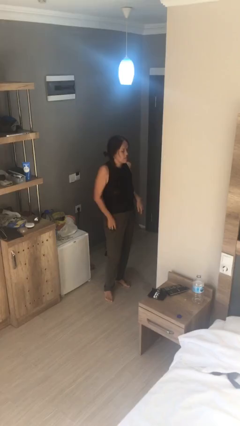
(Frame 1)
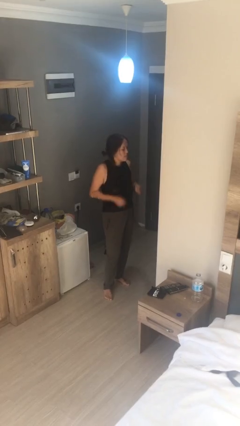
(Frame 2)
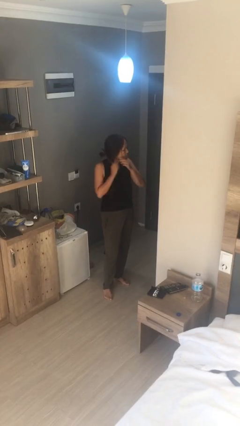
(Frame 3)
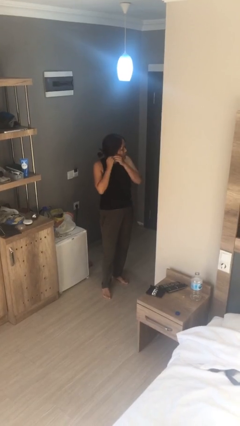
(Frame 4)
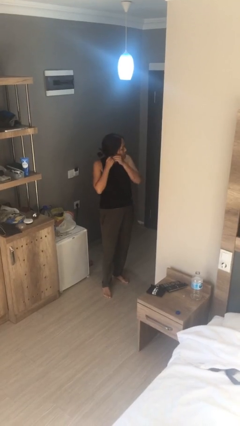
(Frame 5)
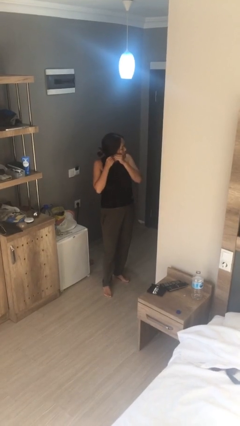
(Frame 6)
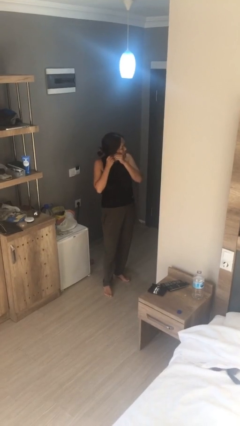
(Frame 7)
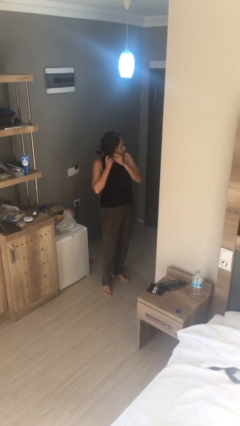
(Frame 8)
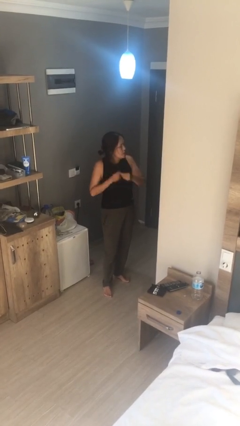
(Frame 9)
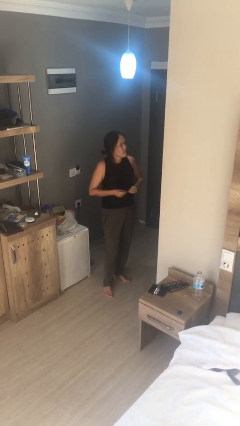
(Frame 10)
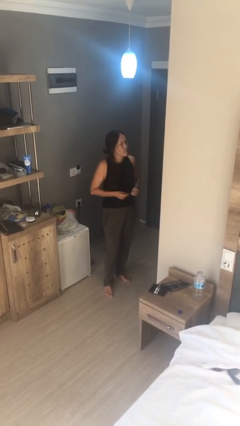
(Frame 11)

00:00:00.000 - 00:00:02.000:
person takes off earrings

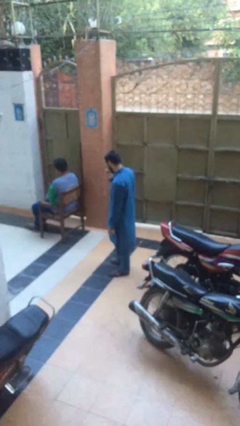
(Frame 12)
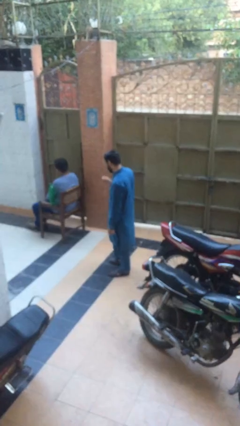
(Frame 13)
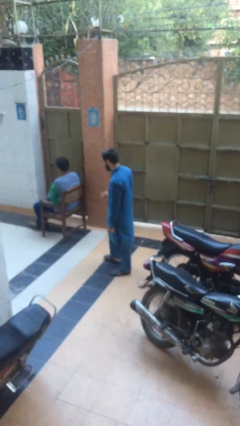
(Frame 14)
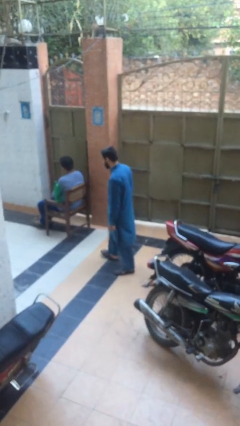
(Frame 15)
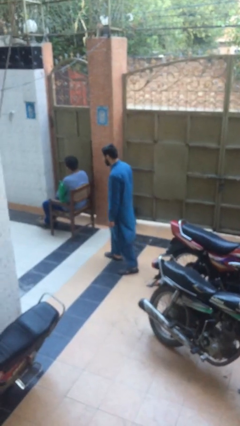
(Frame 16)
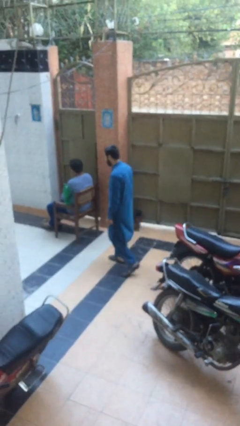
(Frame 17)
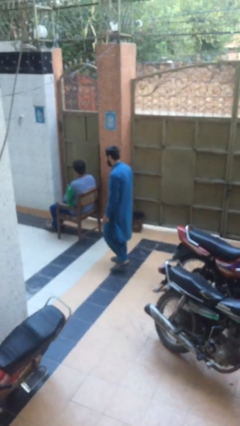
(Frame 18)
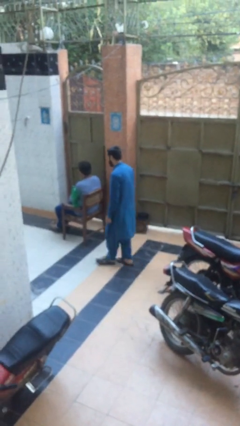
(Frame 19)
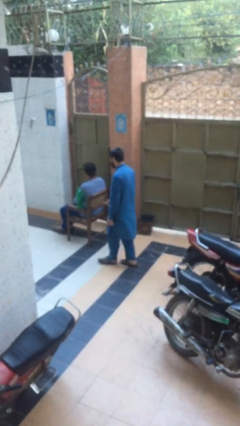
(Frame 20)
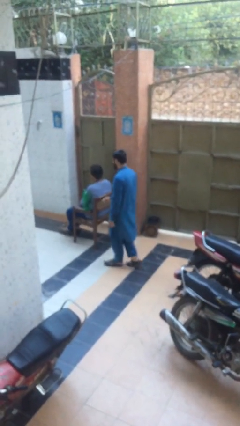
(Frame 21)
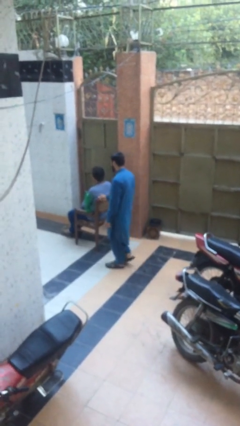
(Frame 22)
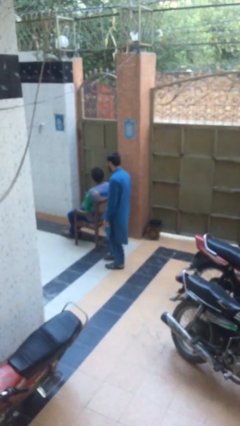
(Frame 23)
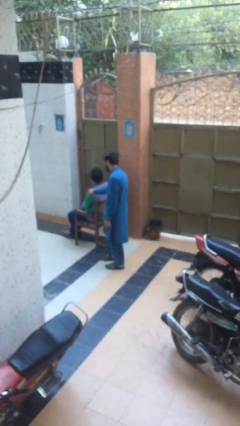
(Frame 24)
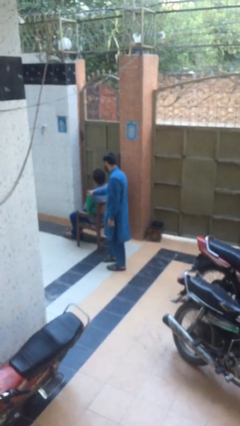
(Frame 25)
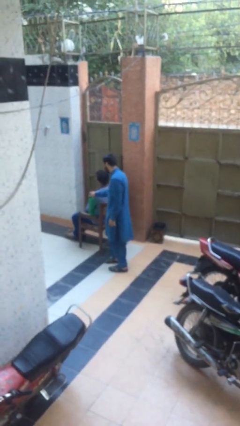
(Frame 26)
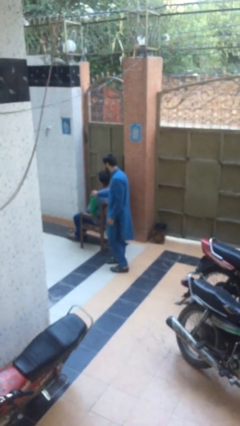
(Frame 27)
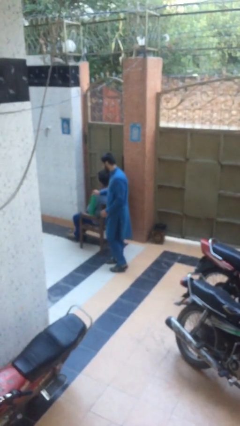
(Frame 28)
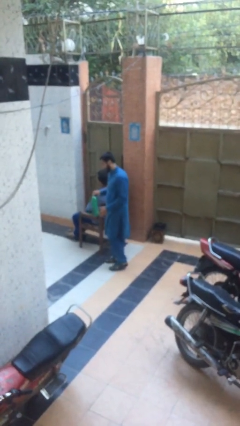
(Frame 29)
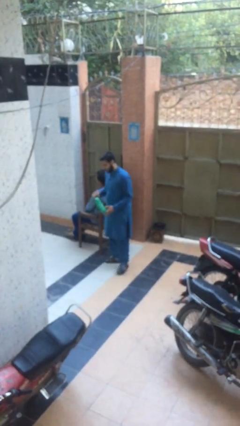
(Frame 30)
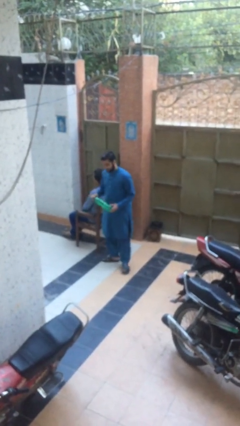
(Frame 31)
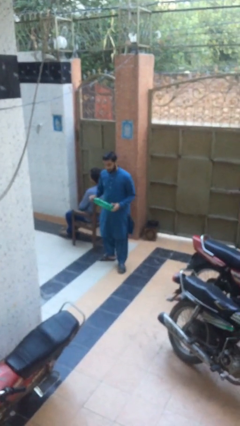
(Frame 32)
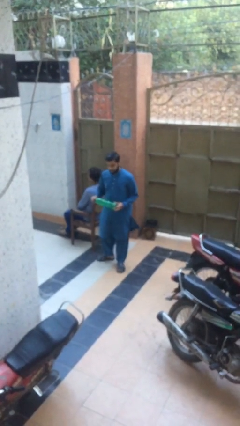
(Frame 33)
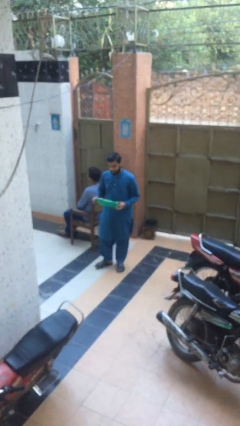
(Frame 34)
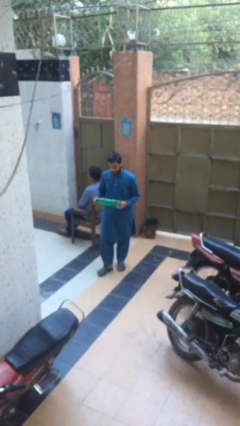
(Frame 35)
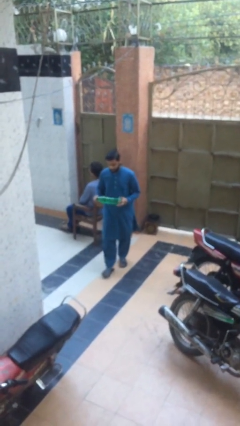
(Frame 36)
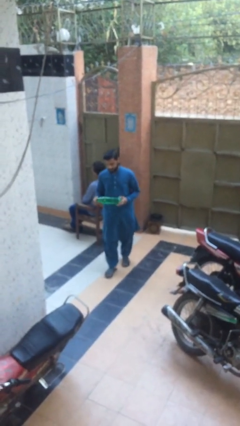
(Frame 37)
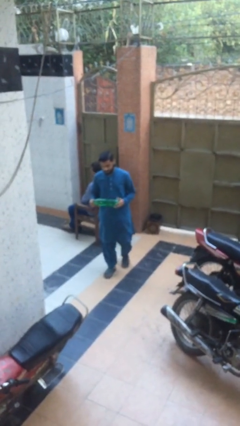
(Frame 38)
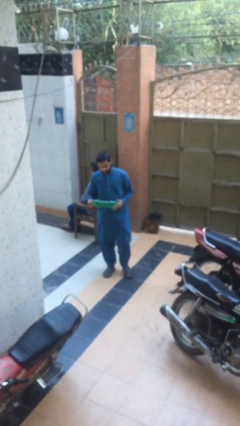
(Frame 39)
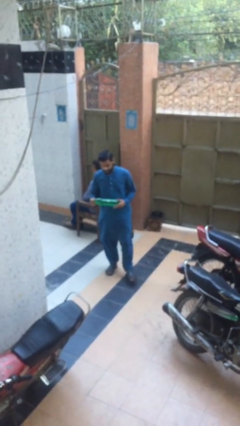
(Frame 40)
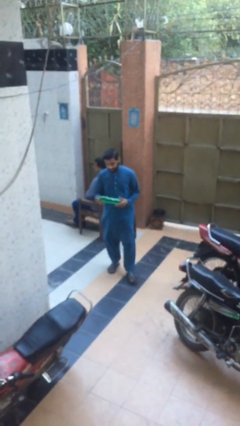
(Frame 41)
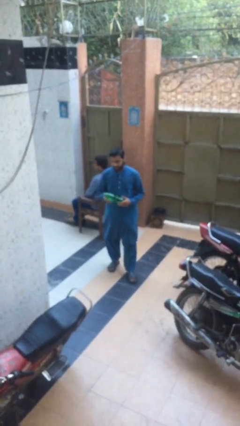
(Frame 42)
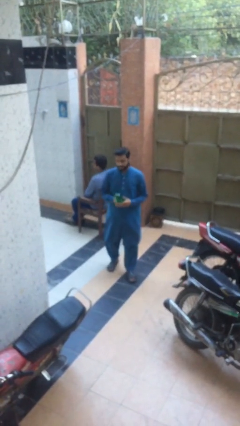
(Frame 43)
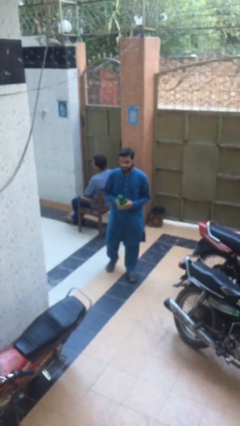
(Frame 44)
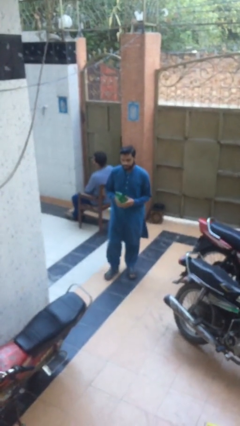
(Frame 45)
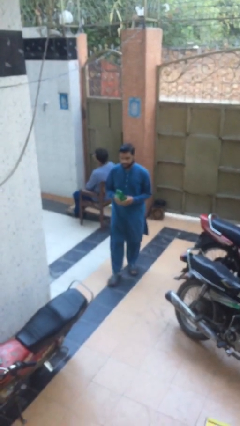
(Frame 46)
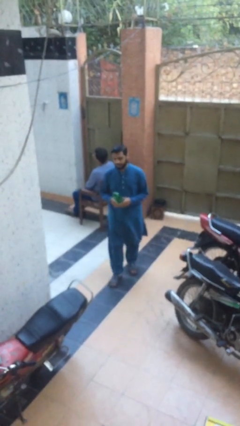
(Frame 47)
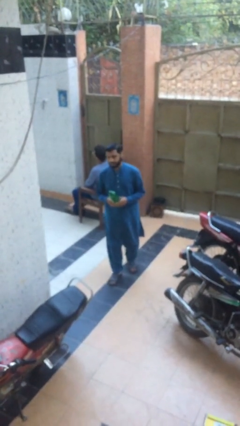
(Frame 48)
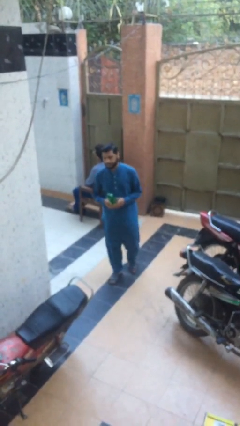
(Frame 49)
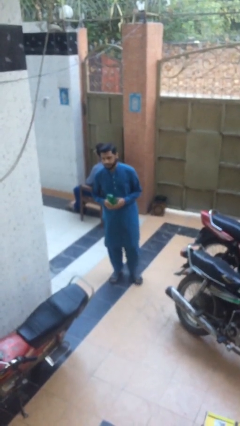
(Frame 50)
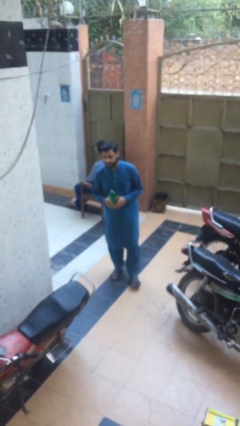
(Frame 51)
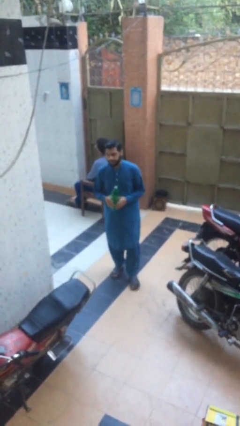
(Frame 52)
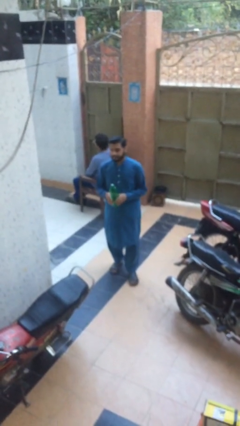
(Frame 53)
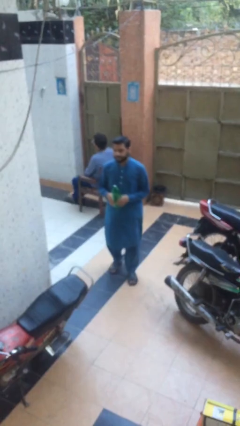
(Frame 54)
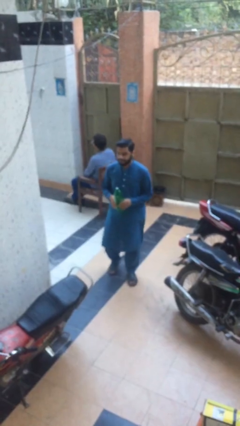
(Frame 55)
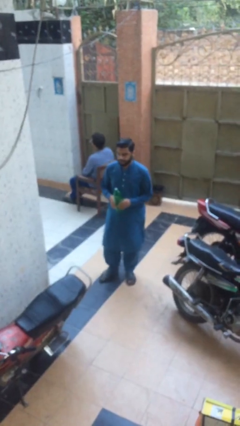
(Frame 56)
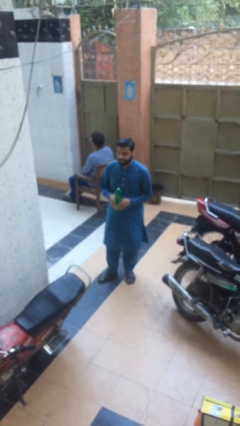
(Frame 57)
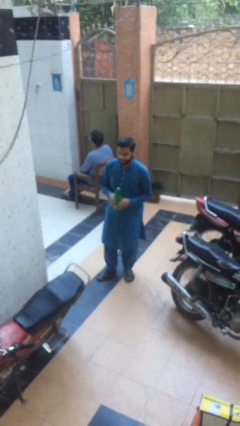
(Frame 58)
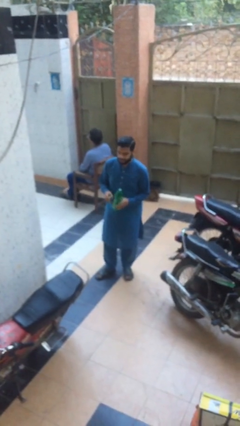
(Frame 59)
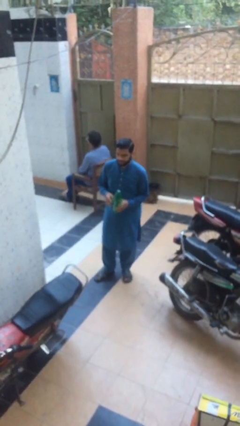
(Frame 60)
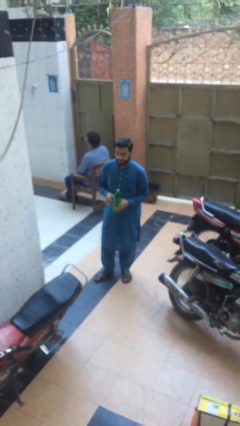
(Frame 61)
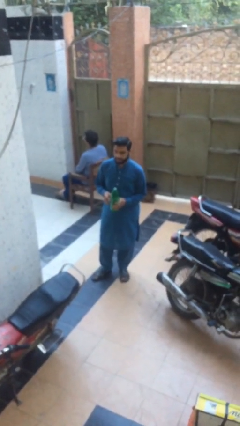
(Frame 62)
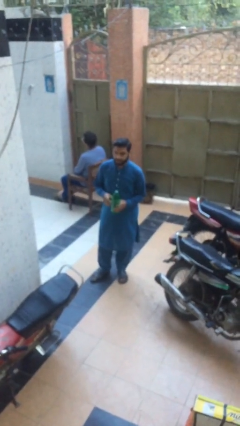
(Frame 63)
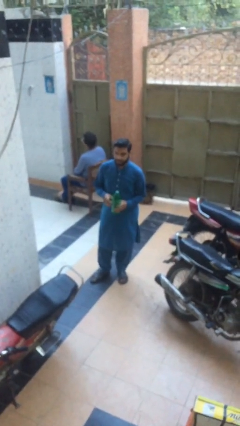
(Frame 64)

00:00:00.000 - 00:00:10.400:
person steals object from person

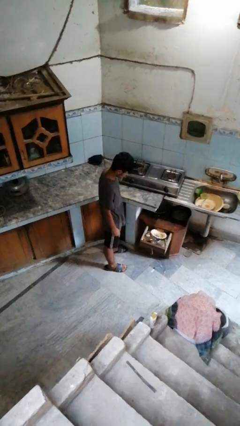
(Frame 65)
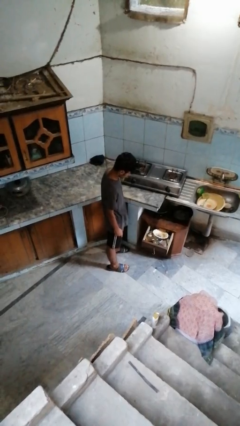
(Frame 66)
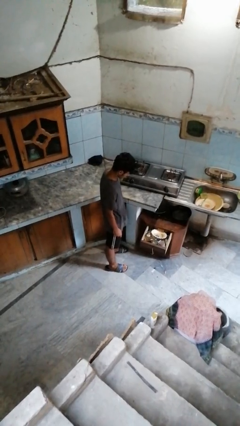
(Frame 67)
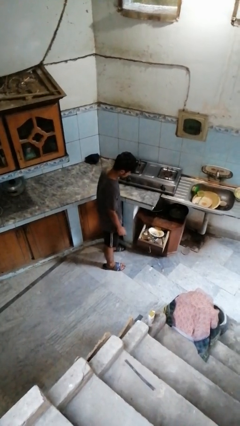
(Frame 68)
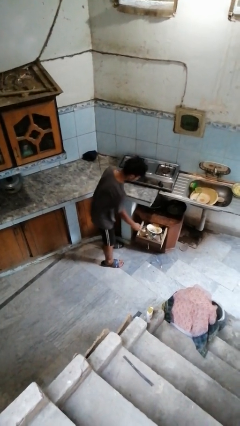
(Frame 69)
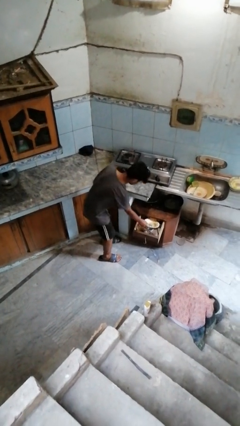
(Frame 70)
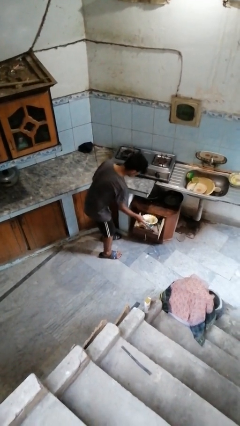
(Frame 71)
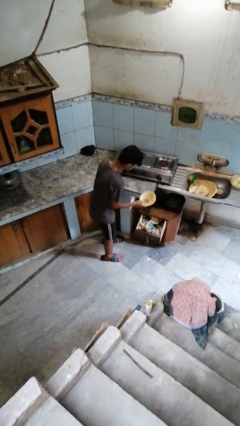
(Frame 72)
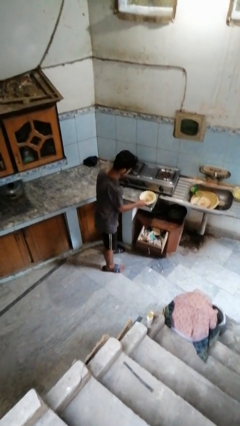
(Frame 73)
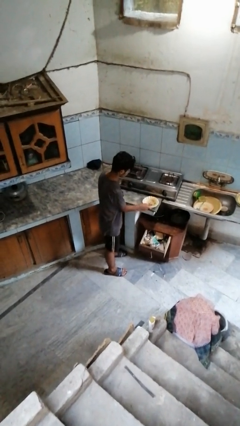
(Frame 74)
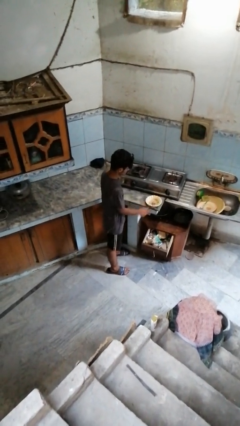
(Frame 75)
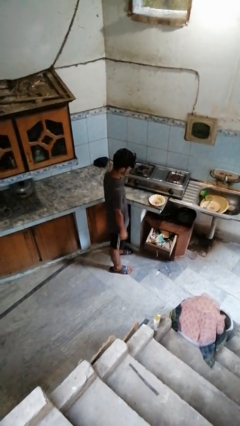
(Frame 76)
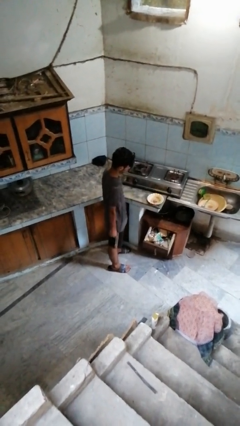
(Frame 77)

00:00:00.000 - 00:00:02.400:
person takes object from kitchen drawer

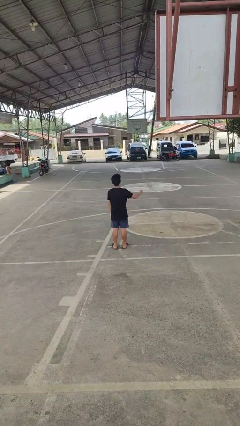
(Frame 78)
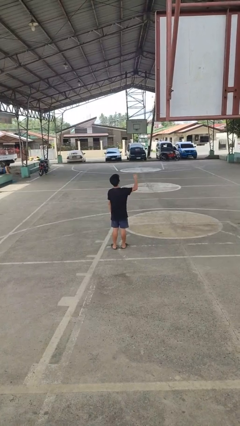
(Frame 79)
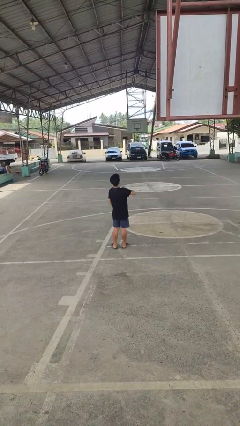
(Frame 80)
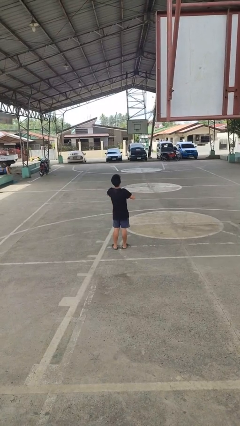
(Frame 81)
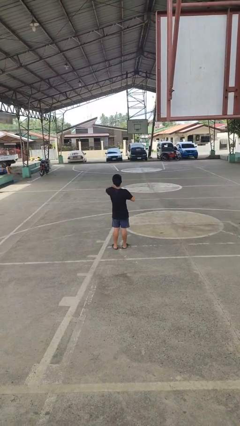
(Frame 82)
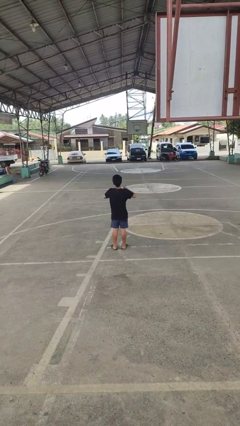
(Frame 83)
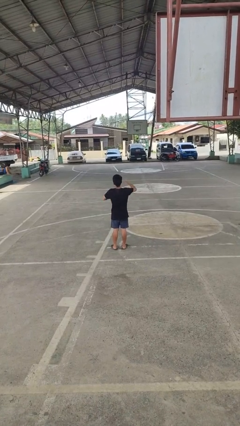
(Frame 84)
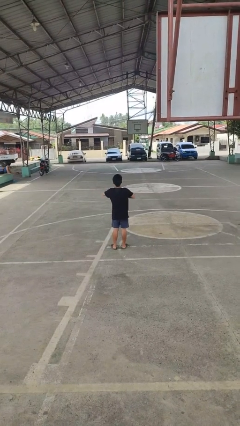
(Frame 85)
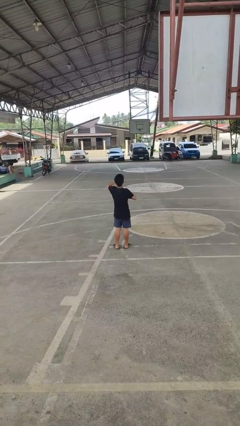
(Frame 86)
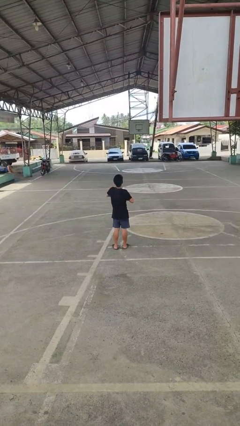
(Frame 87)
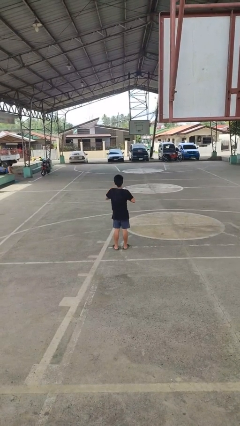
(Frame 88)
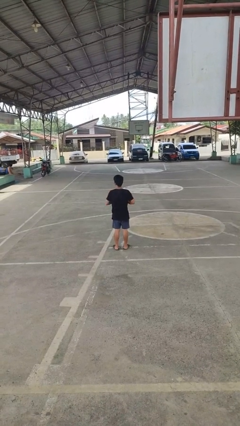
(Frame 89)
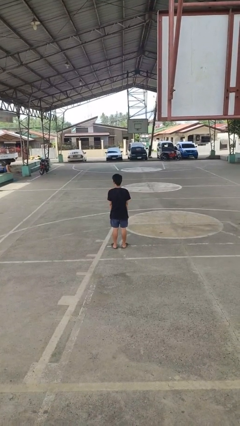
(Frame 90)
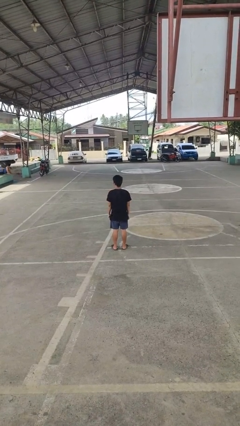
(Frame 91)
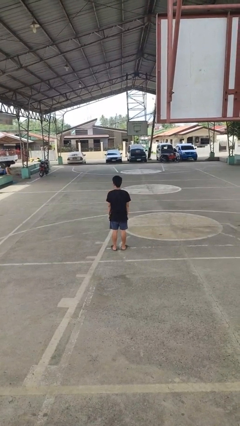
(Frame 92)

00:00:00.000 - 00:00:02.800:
person drums on chest
